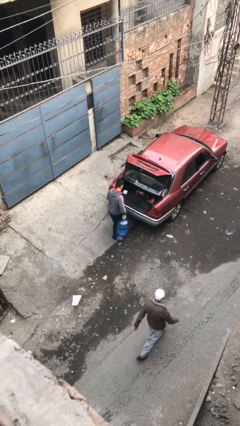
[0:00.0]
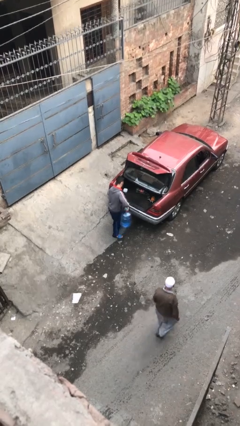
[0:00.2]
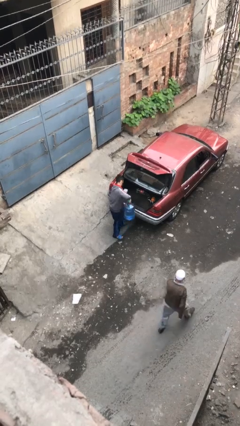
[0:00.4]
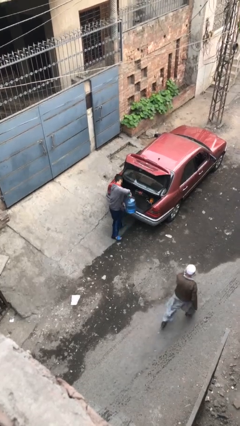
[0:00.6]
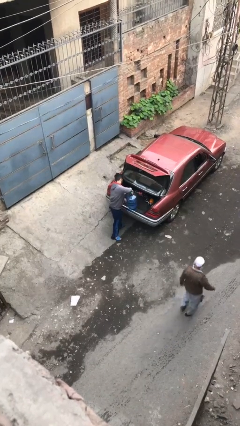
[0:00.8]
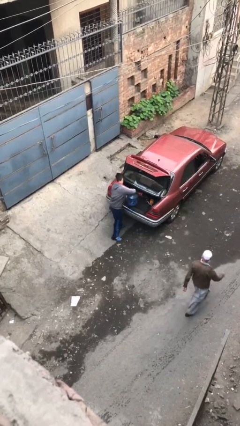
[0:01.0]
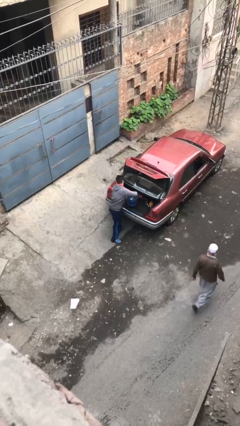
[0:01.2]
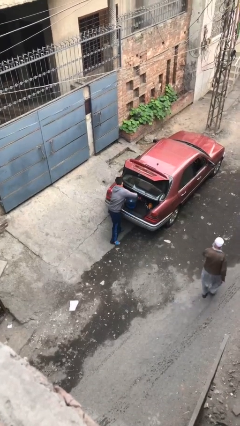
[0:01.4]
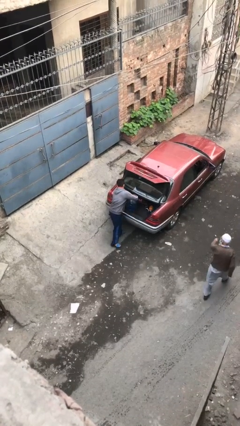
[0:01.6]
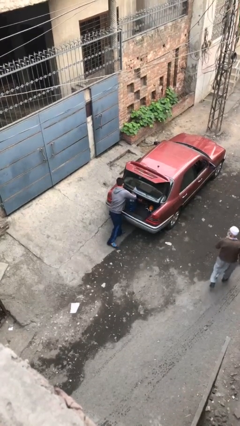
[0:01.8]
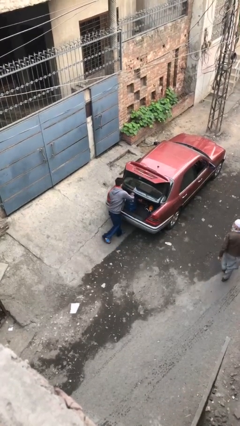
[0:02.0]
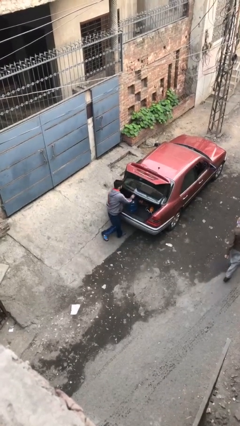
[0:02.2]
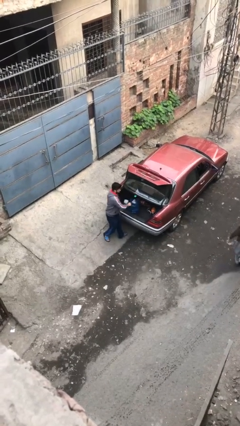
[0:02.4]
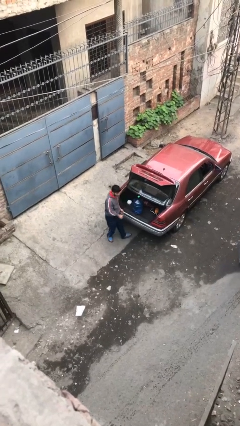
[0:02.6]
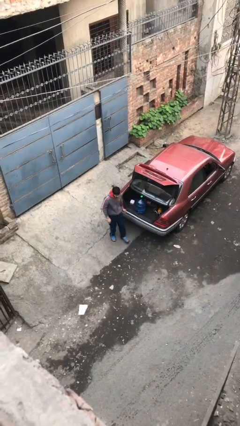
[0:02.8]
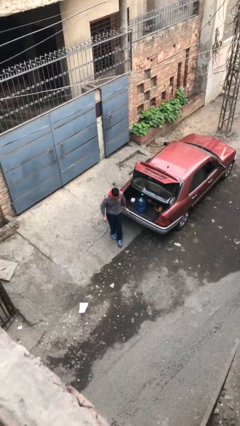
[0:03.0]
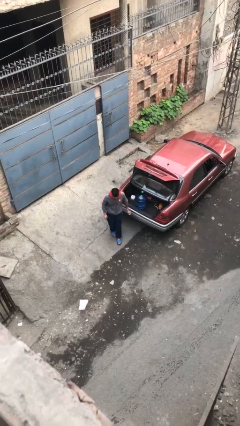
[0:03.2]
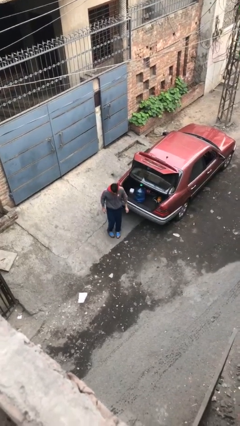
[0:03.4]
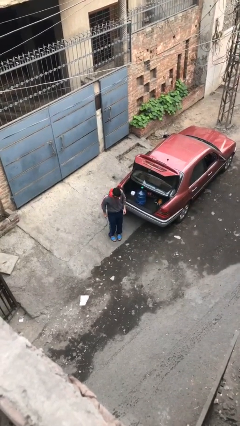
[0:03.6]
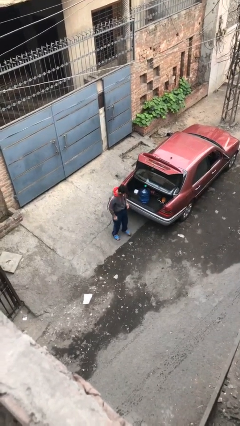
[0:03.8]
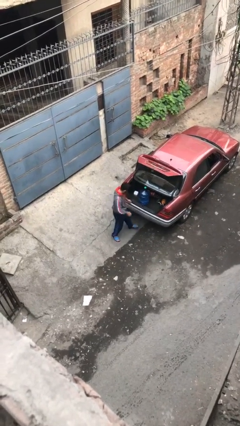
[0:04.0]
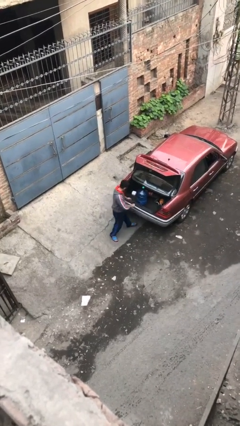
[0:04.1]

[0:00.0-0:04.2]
person loads car

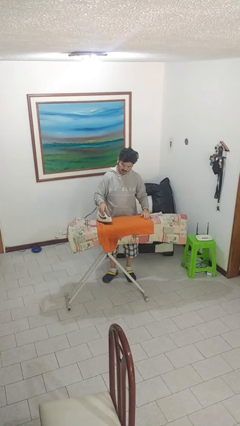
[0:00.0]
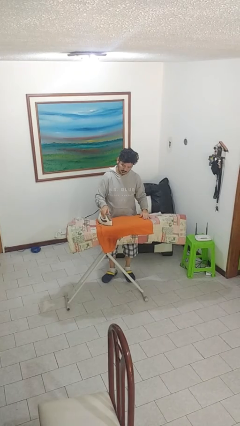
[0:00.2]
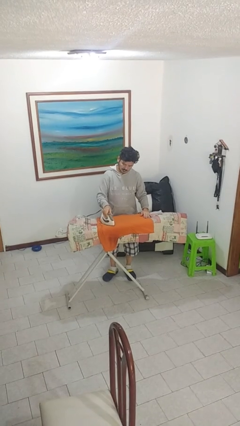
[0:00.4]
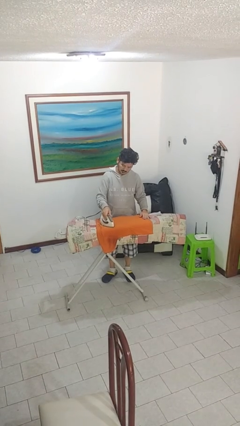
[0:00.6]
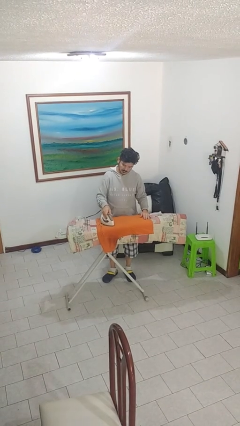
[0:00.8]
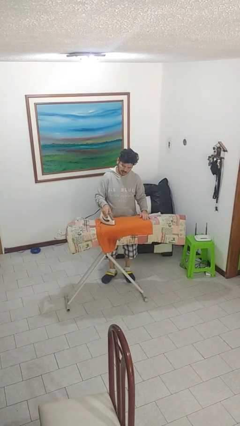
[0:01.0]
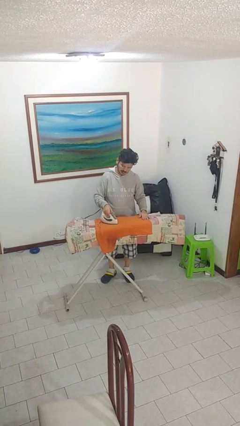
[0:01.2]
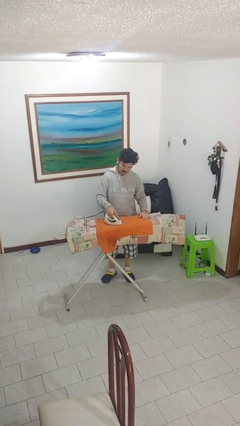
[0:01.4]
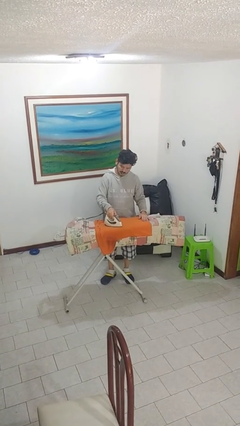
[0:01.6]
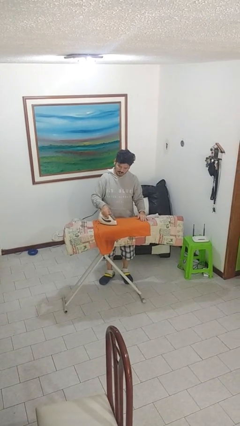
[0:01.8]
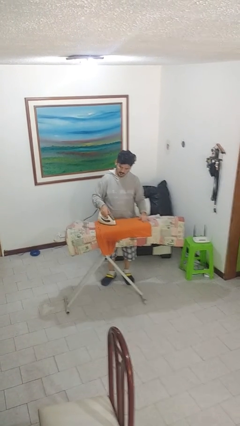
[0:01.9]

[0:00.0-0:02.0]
person irons clothes

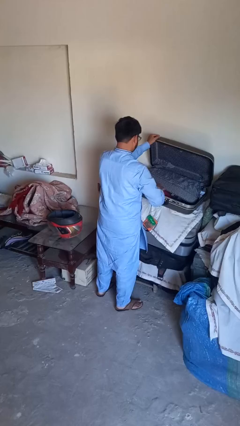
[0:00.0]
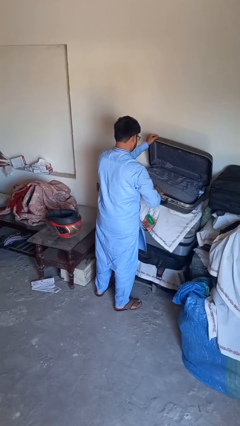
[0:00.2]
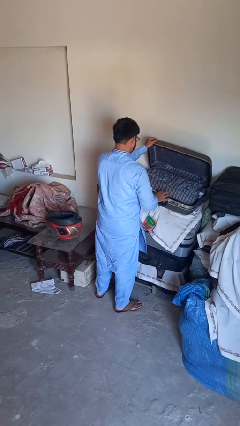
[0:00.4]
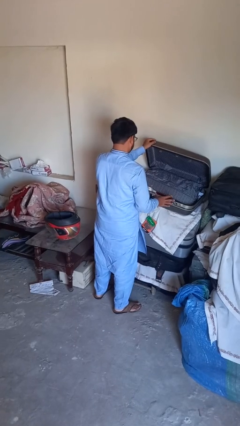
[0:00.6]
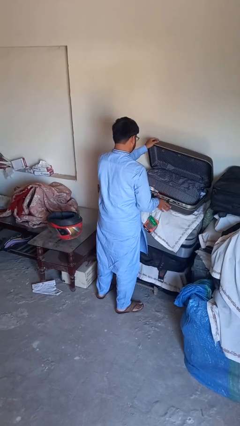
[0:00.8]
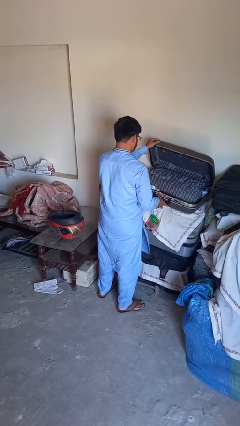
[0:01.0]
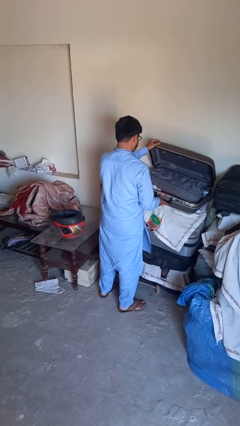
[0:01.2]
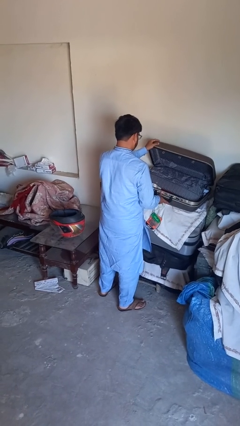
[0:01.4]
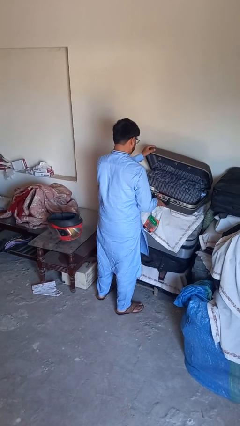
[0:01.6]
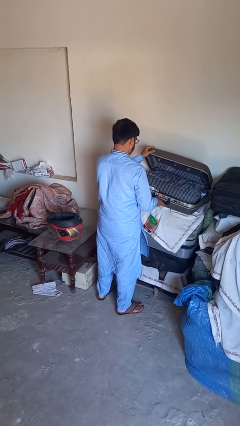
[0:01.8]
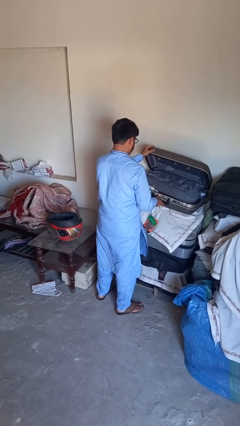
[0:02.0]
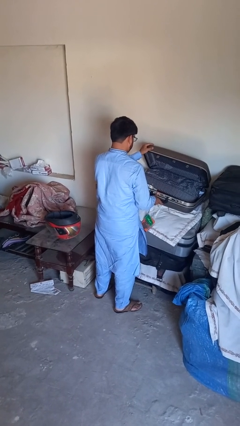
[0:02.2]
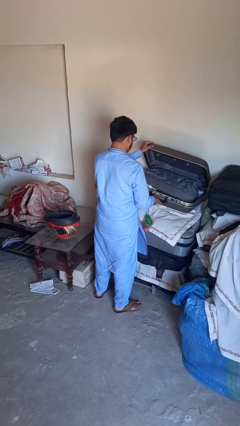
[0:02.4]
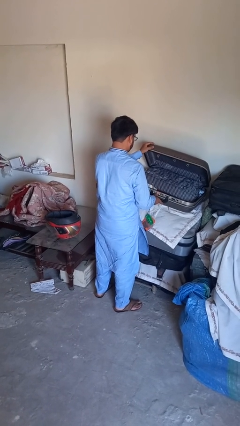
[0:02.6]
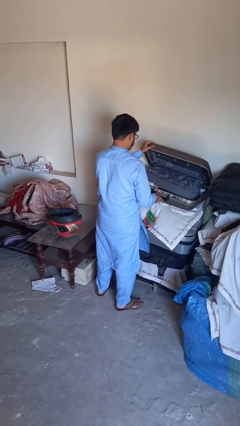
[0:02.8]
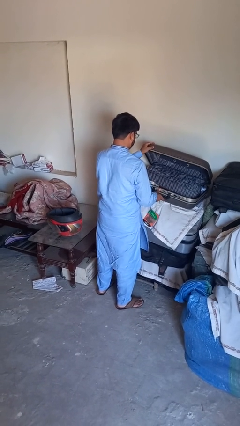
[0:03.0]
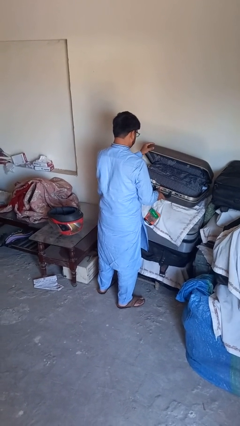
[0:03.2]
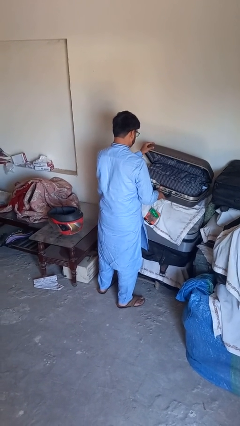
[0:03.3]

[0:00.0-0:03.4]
person opens suitcase

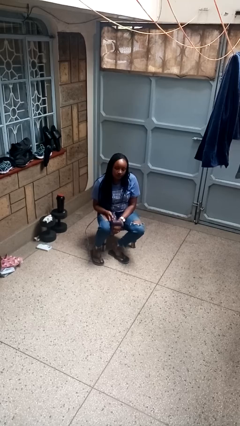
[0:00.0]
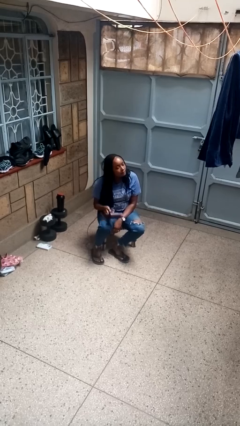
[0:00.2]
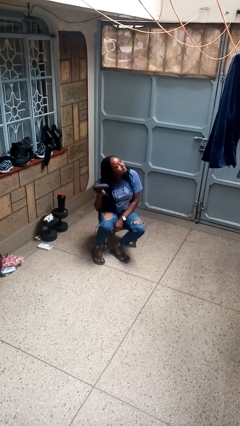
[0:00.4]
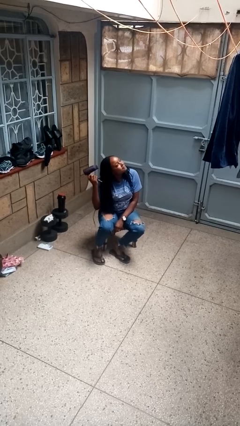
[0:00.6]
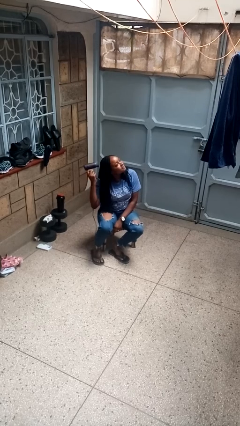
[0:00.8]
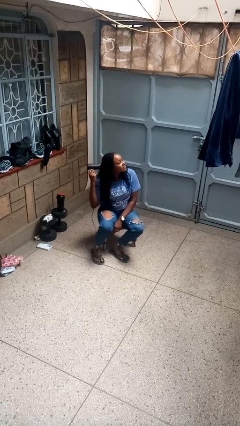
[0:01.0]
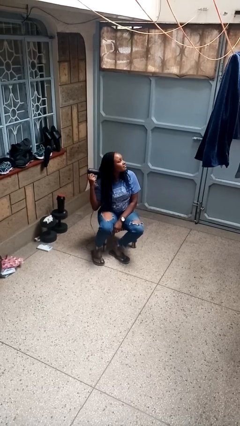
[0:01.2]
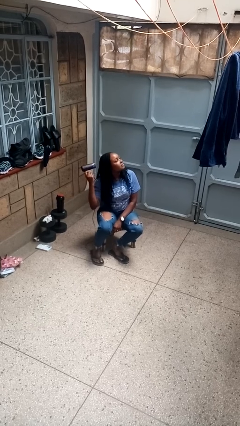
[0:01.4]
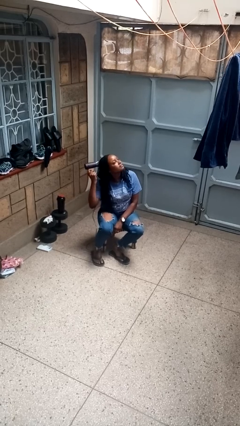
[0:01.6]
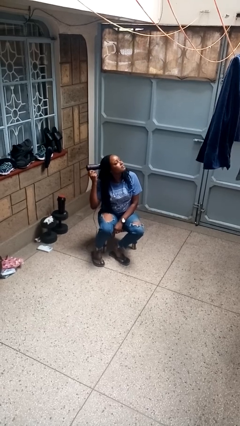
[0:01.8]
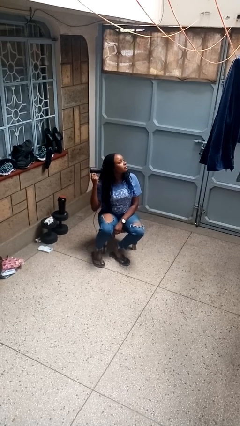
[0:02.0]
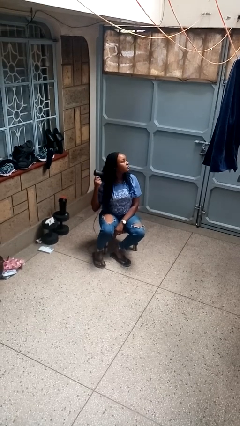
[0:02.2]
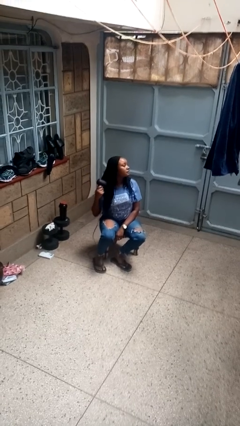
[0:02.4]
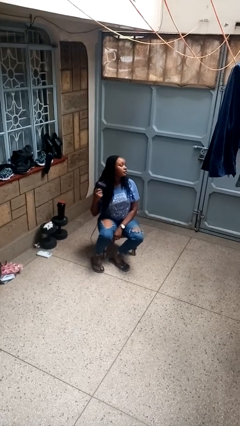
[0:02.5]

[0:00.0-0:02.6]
person dries hair with hairdryer

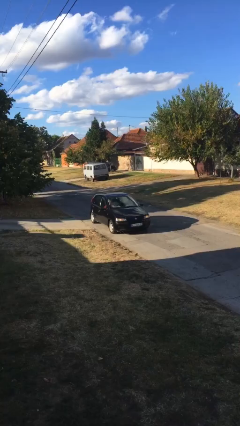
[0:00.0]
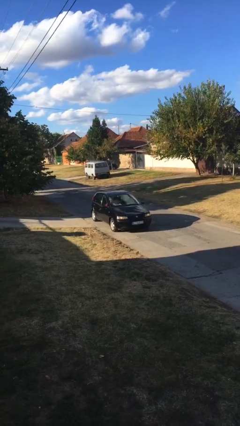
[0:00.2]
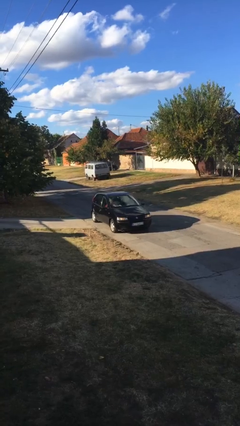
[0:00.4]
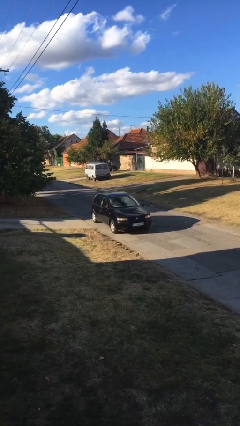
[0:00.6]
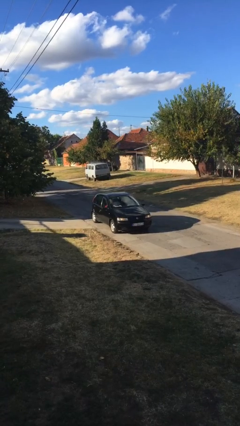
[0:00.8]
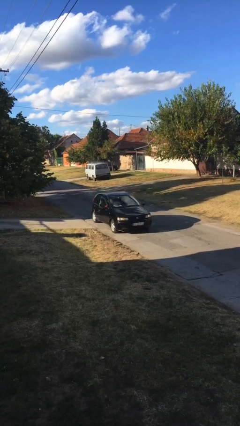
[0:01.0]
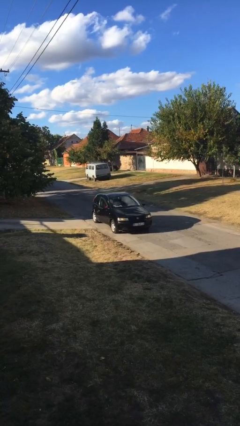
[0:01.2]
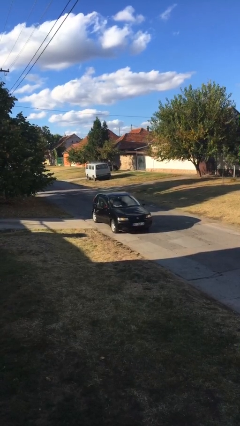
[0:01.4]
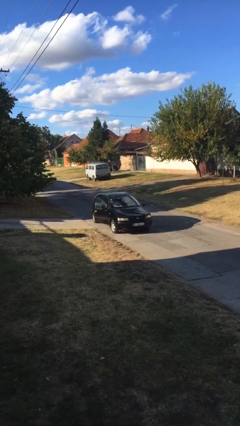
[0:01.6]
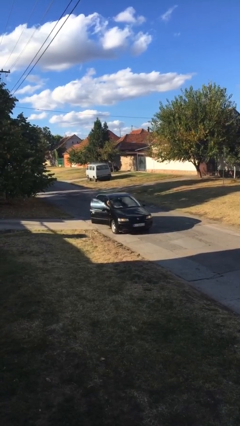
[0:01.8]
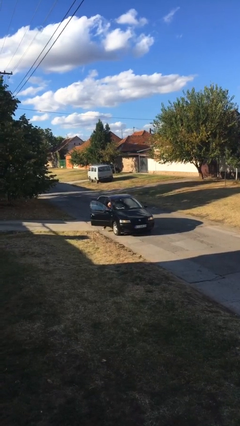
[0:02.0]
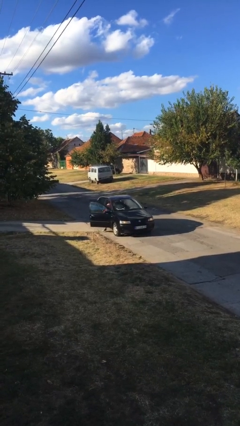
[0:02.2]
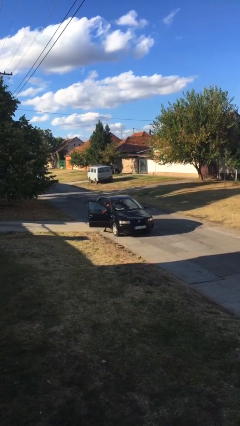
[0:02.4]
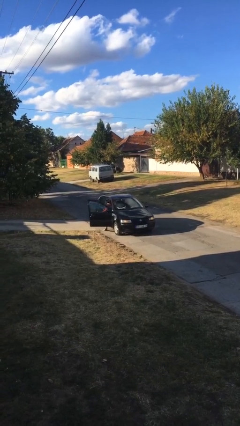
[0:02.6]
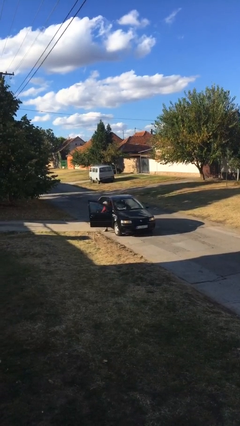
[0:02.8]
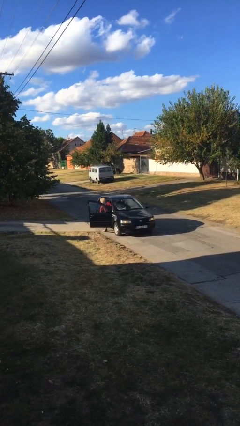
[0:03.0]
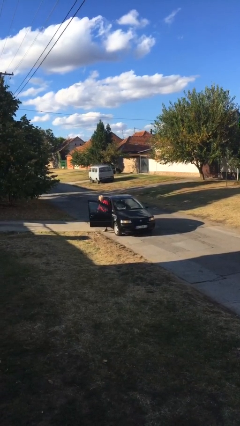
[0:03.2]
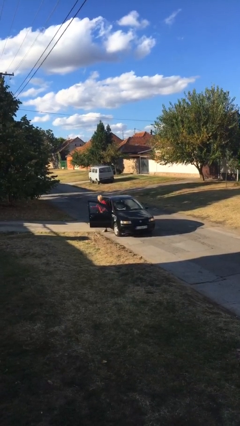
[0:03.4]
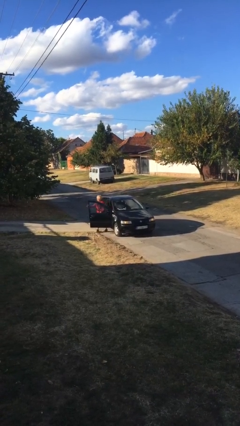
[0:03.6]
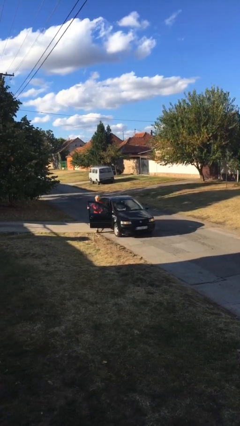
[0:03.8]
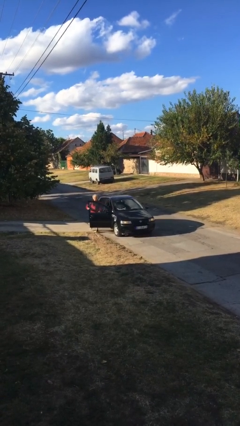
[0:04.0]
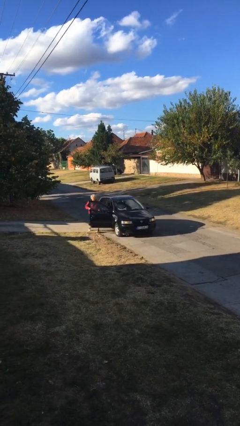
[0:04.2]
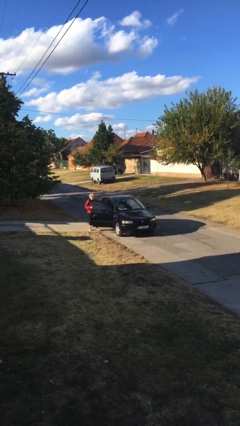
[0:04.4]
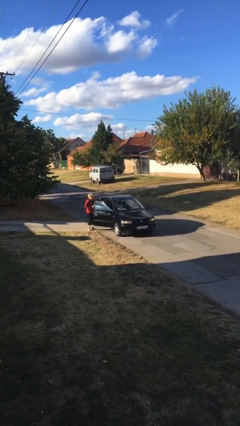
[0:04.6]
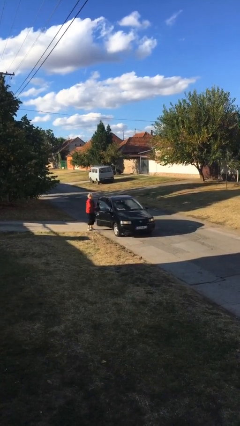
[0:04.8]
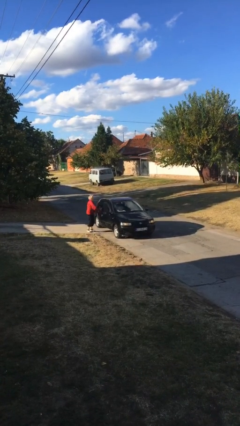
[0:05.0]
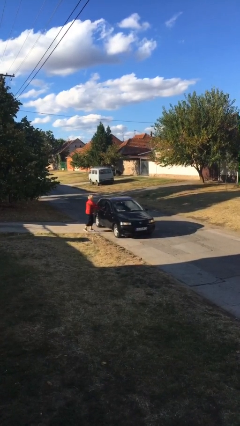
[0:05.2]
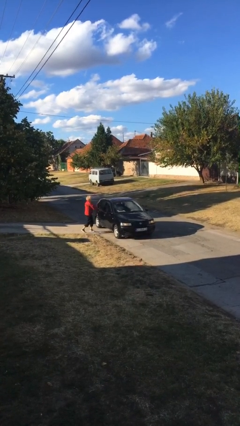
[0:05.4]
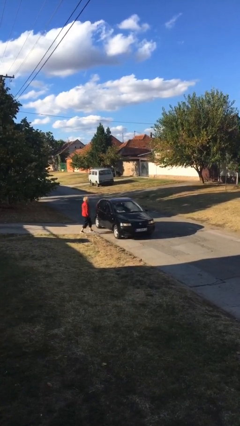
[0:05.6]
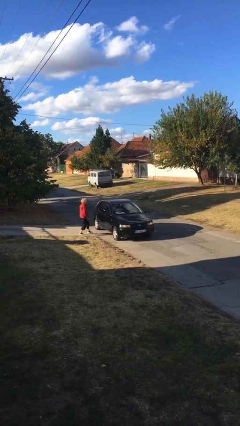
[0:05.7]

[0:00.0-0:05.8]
car drops off person
